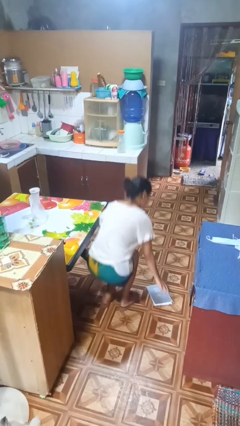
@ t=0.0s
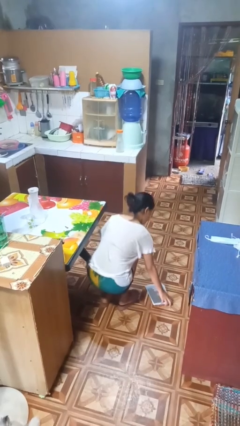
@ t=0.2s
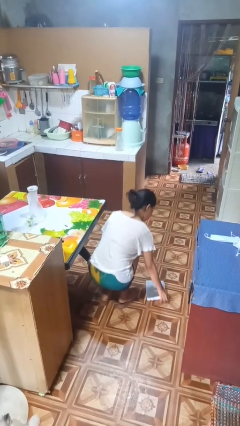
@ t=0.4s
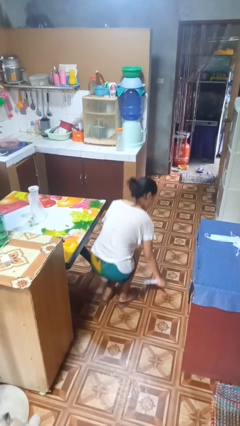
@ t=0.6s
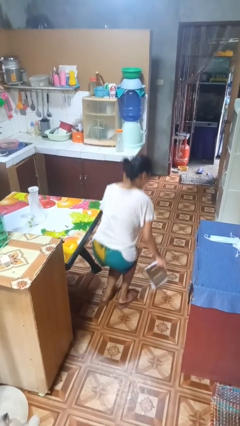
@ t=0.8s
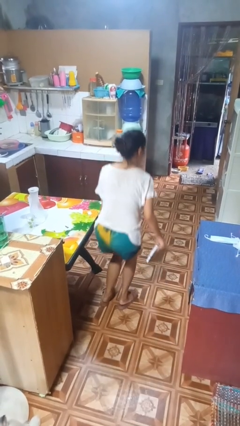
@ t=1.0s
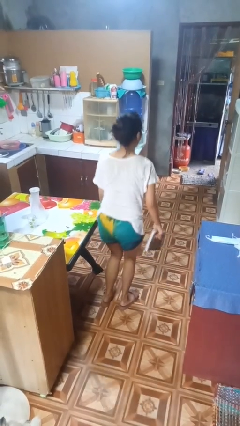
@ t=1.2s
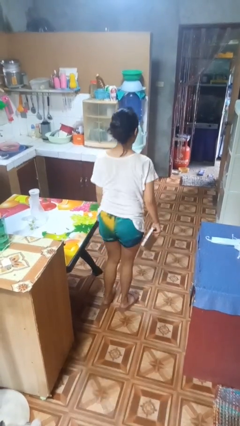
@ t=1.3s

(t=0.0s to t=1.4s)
person picks up object from floor

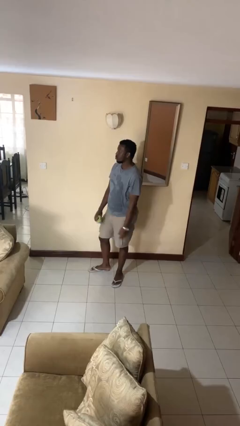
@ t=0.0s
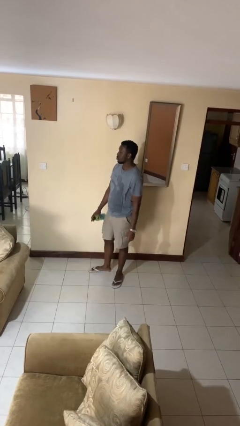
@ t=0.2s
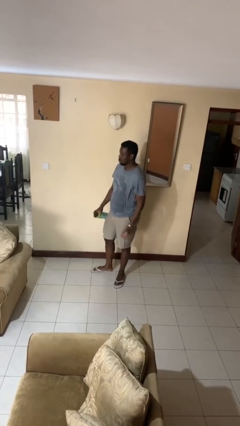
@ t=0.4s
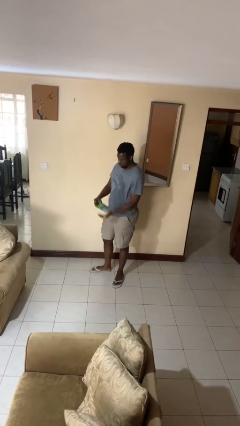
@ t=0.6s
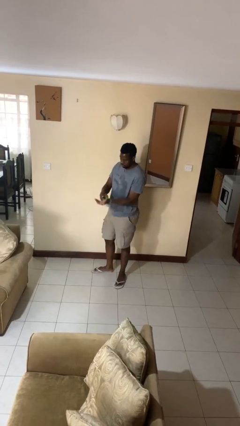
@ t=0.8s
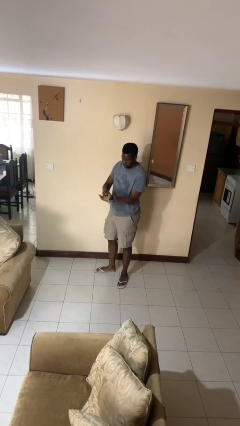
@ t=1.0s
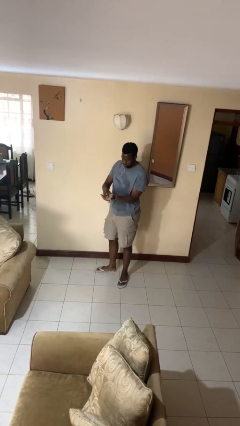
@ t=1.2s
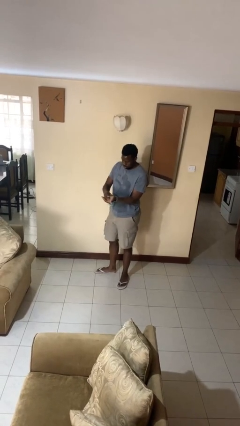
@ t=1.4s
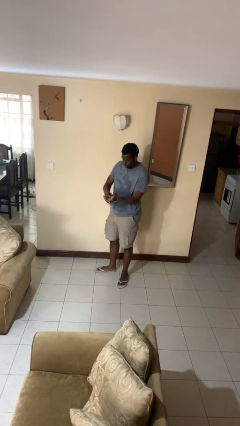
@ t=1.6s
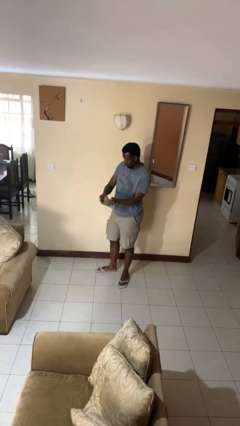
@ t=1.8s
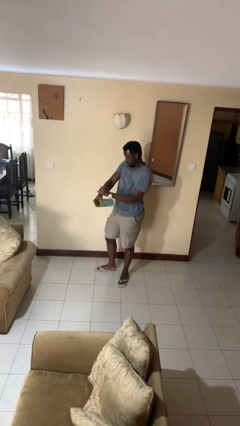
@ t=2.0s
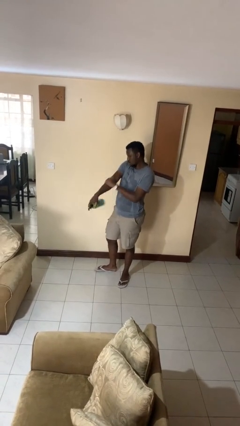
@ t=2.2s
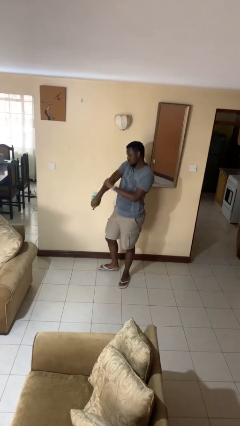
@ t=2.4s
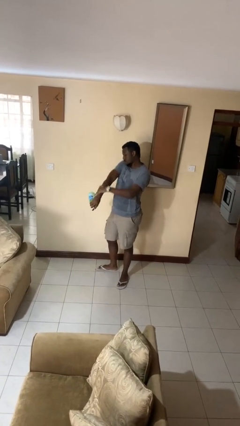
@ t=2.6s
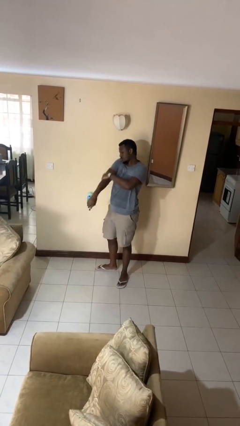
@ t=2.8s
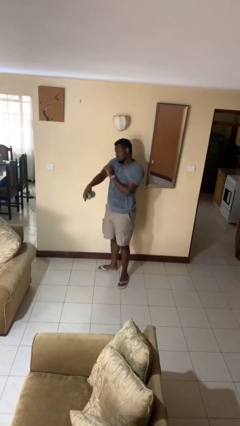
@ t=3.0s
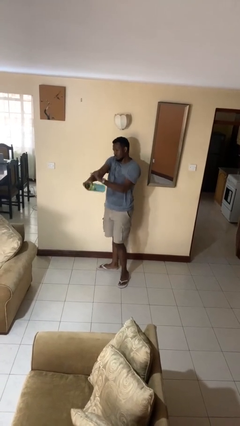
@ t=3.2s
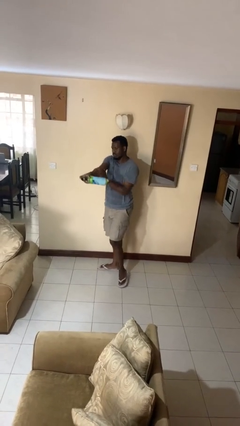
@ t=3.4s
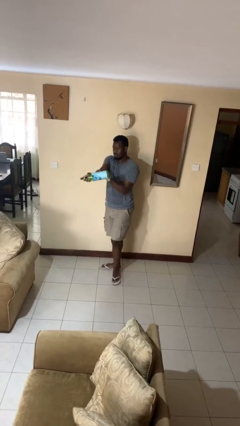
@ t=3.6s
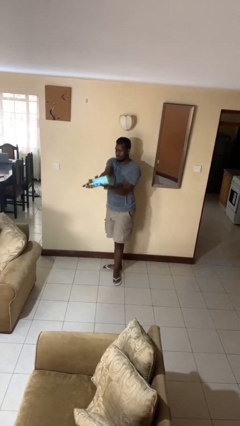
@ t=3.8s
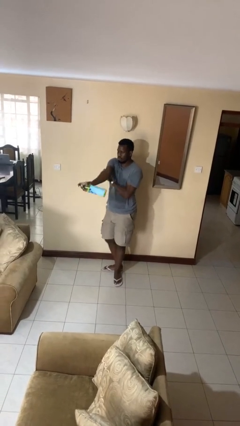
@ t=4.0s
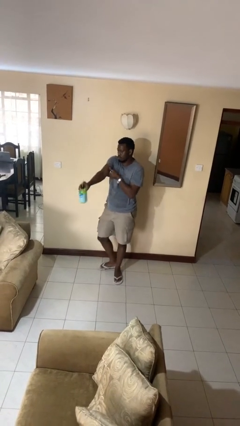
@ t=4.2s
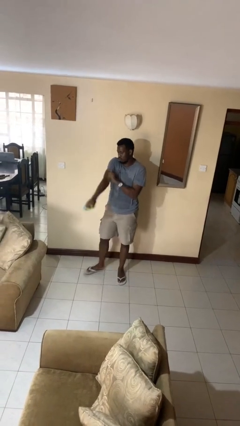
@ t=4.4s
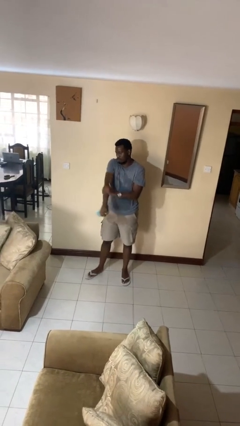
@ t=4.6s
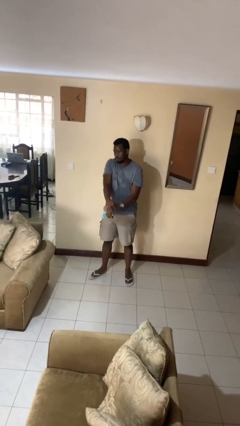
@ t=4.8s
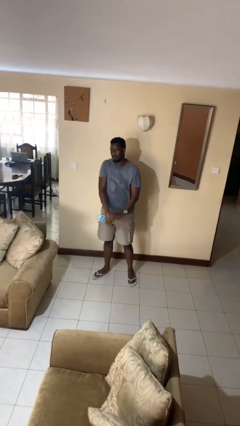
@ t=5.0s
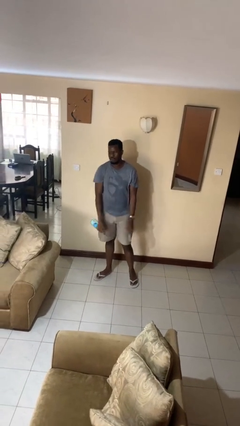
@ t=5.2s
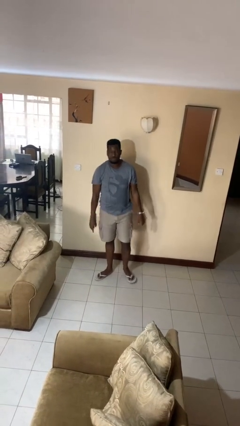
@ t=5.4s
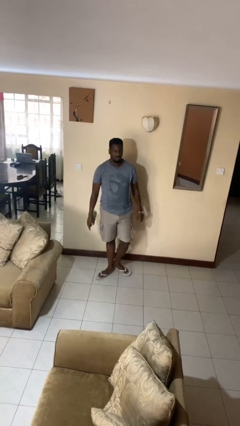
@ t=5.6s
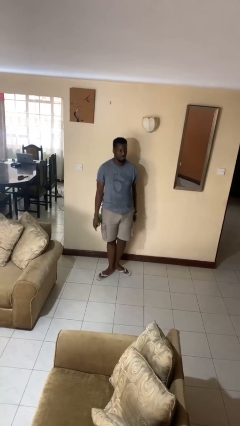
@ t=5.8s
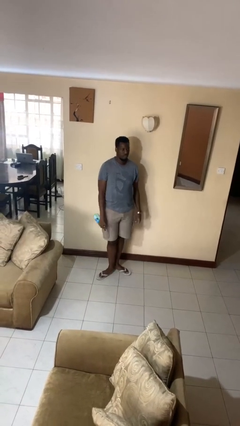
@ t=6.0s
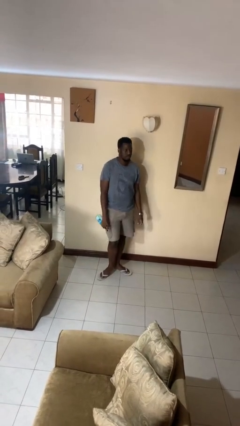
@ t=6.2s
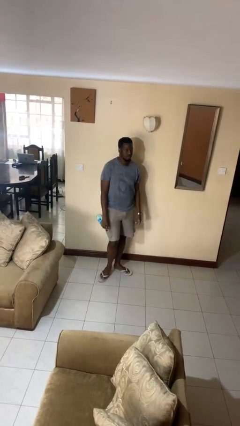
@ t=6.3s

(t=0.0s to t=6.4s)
person applies sunscreen

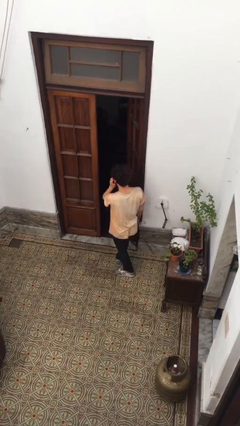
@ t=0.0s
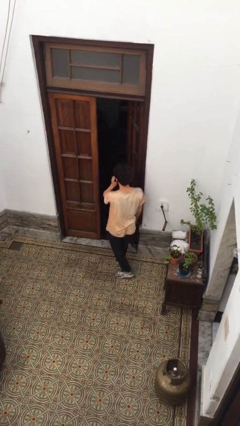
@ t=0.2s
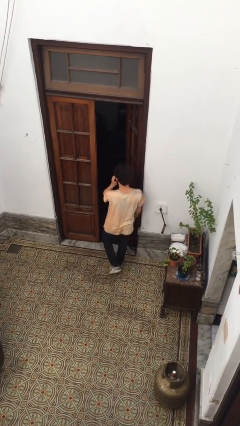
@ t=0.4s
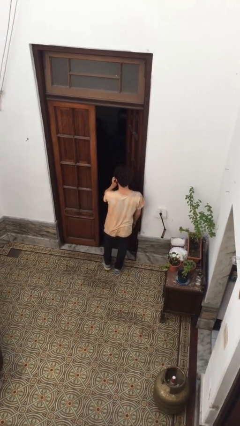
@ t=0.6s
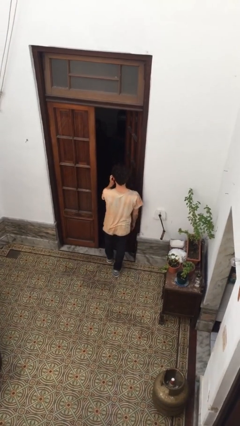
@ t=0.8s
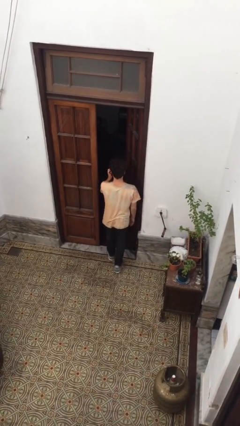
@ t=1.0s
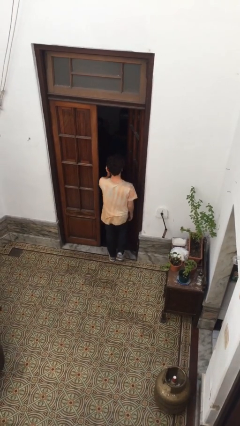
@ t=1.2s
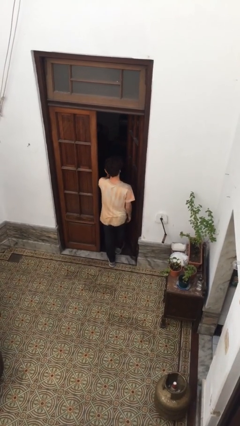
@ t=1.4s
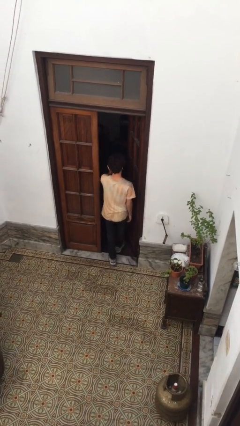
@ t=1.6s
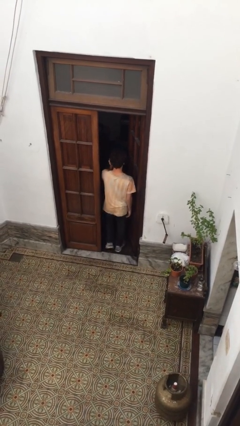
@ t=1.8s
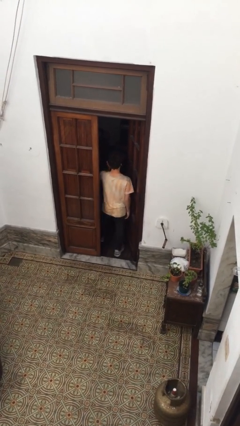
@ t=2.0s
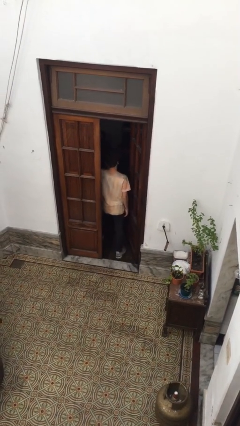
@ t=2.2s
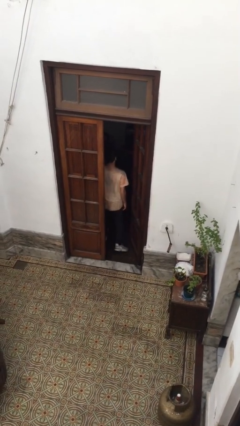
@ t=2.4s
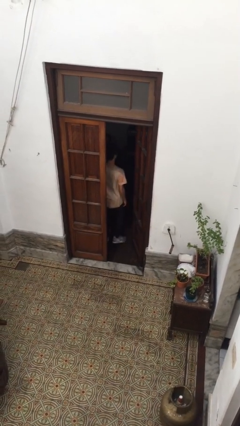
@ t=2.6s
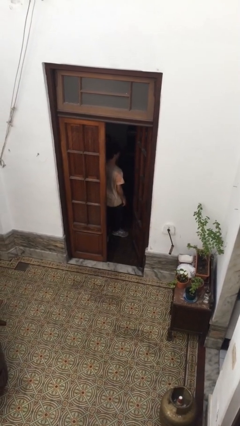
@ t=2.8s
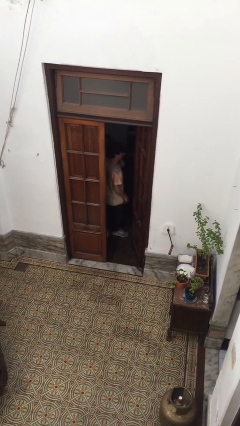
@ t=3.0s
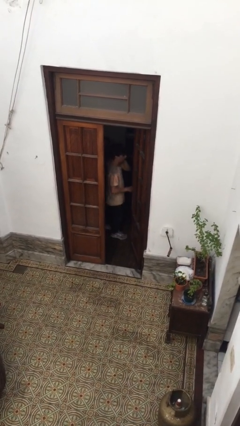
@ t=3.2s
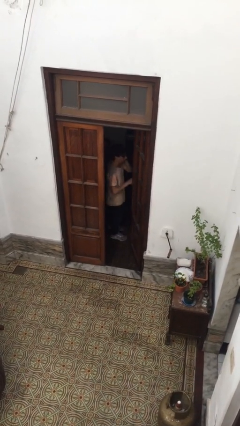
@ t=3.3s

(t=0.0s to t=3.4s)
person exits scene through structure

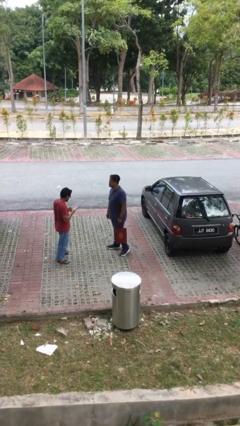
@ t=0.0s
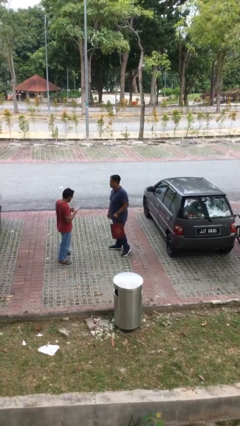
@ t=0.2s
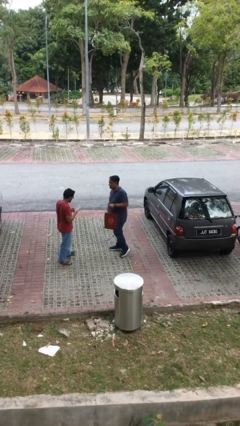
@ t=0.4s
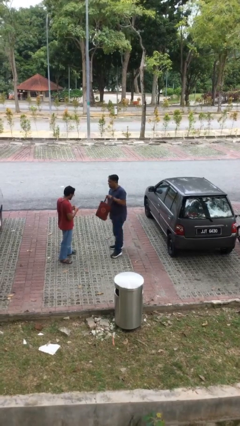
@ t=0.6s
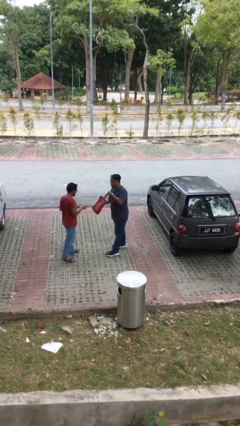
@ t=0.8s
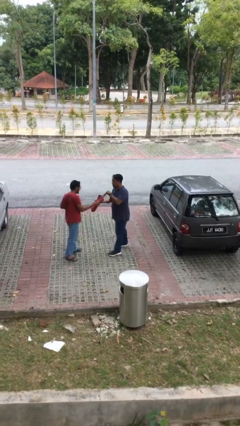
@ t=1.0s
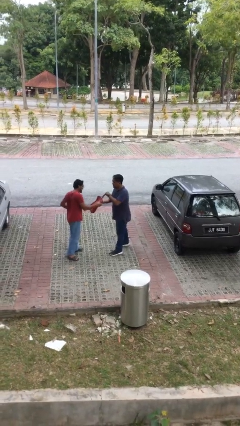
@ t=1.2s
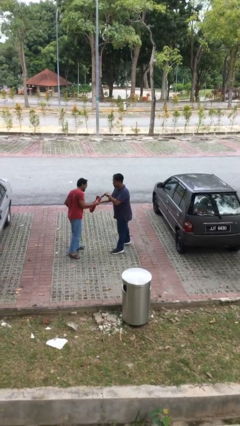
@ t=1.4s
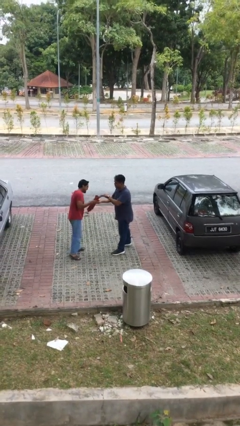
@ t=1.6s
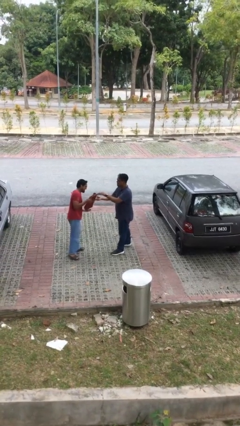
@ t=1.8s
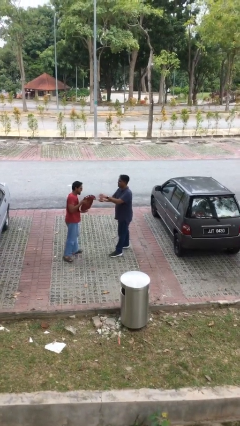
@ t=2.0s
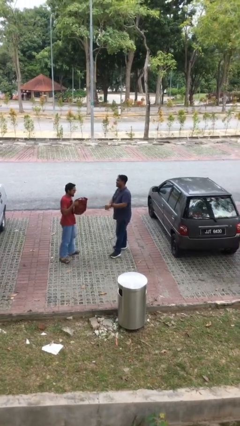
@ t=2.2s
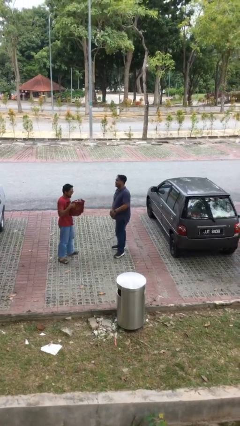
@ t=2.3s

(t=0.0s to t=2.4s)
person transfers object to person

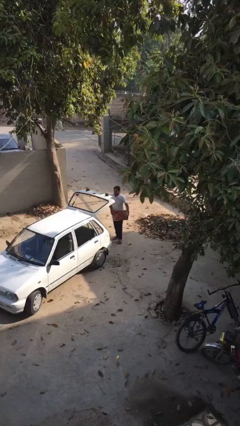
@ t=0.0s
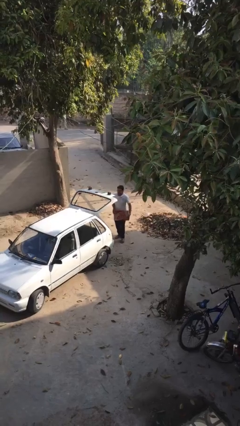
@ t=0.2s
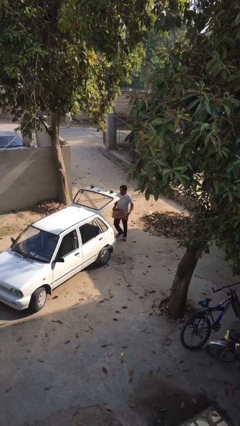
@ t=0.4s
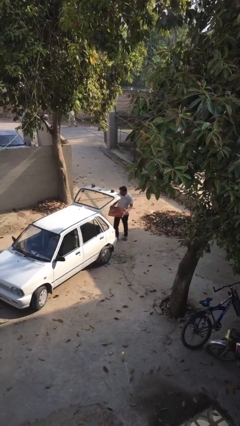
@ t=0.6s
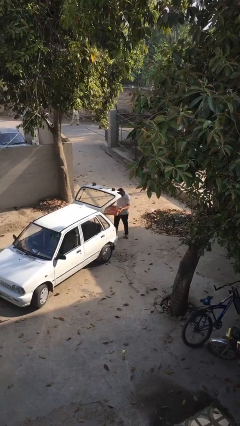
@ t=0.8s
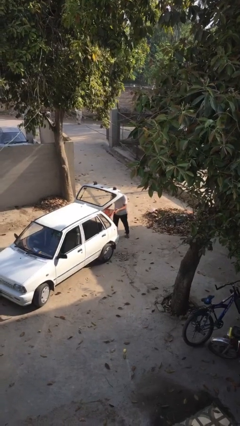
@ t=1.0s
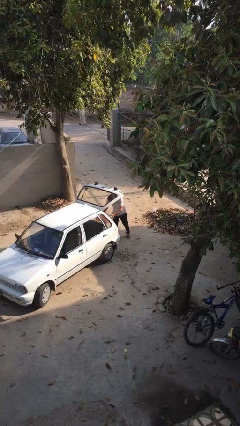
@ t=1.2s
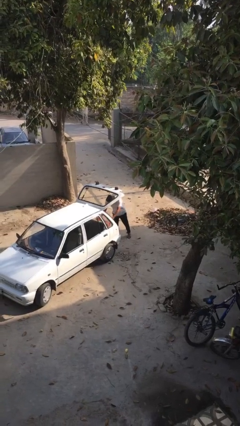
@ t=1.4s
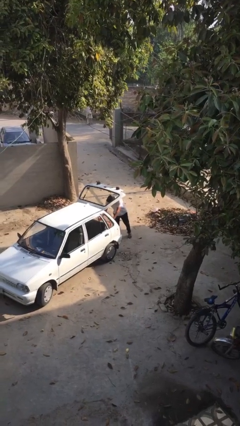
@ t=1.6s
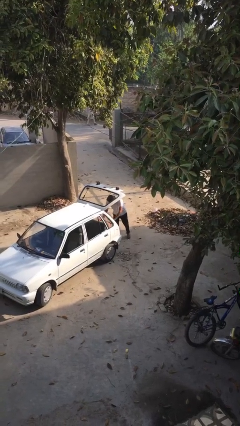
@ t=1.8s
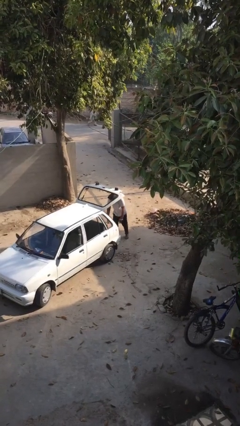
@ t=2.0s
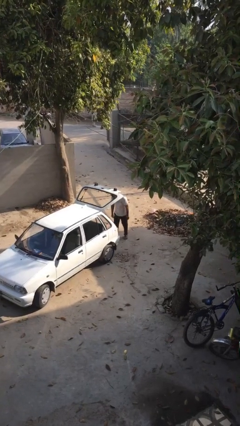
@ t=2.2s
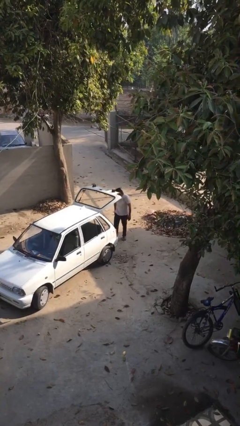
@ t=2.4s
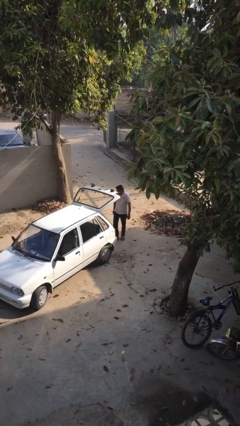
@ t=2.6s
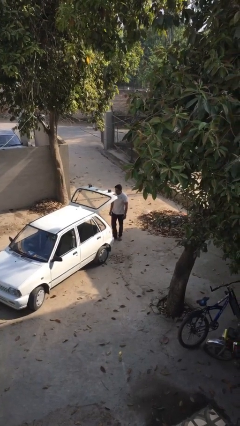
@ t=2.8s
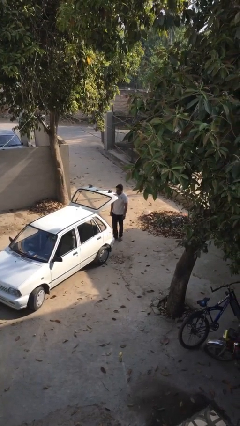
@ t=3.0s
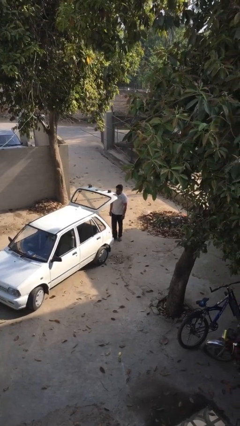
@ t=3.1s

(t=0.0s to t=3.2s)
person loads car

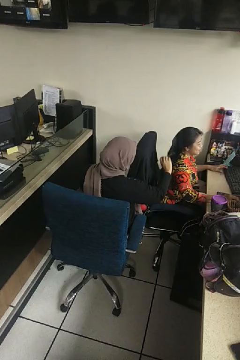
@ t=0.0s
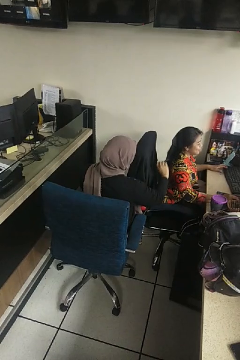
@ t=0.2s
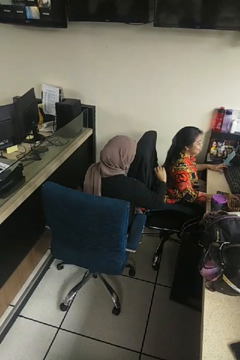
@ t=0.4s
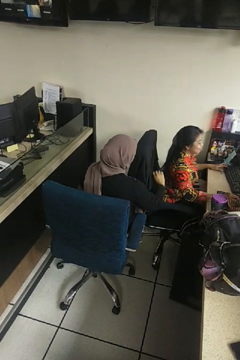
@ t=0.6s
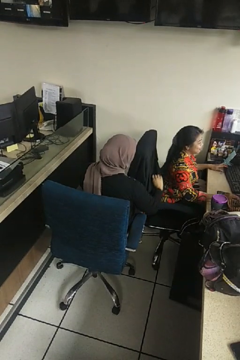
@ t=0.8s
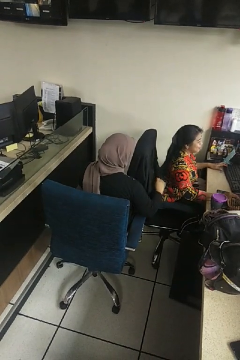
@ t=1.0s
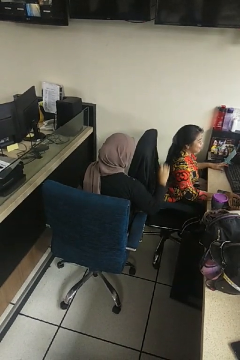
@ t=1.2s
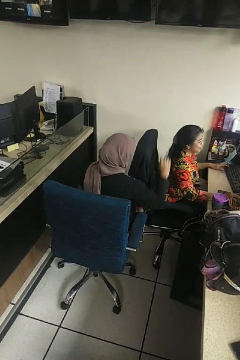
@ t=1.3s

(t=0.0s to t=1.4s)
person brushes hair of person
